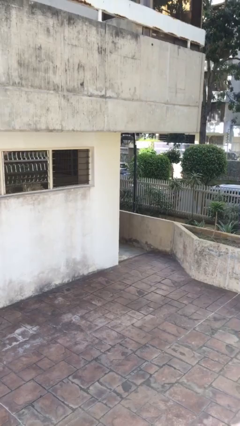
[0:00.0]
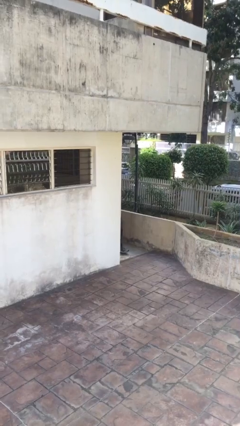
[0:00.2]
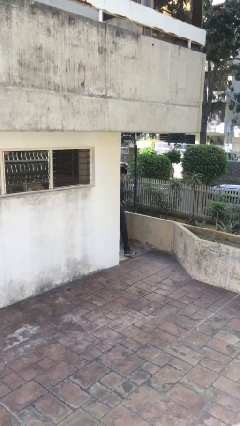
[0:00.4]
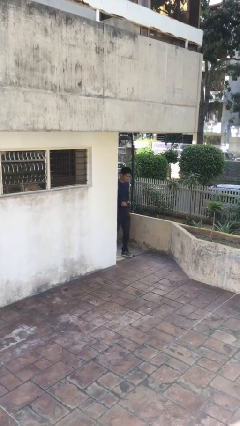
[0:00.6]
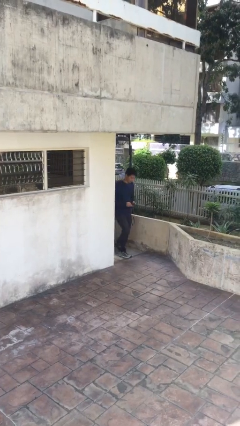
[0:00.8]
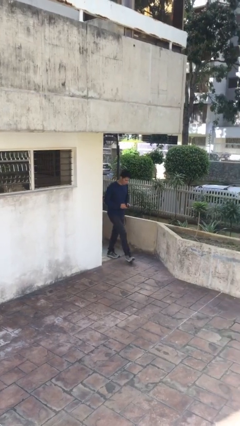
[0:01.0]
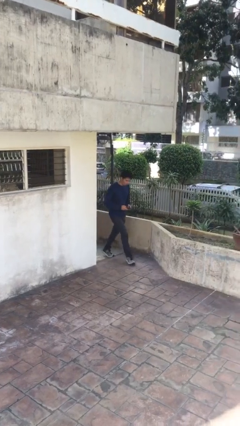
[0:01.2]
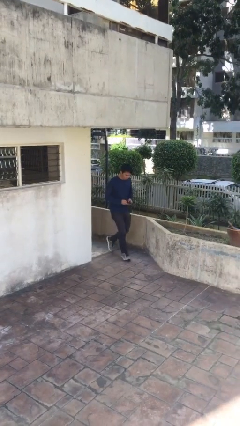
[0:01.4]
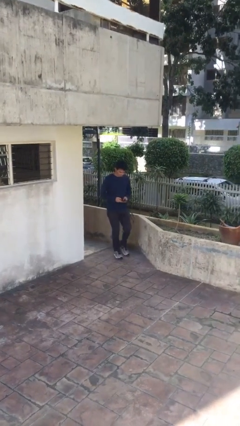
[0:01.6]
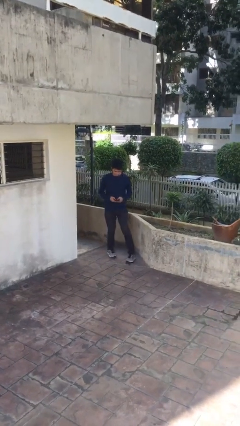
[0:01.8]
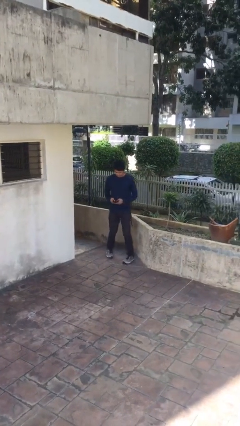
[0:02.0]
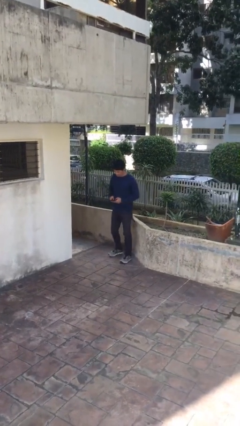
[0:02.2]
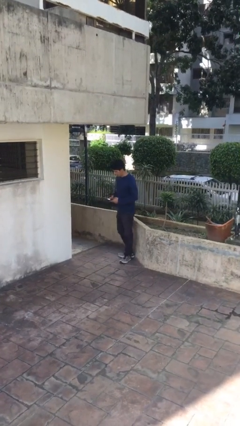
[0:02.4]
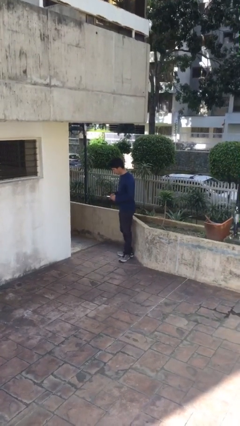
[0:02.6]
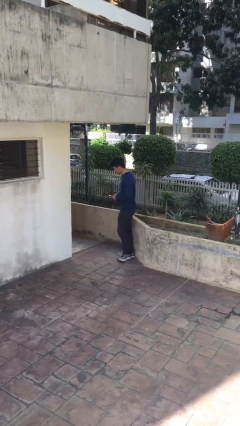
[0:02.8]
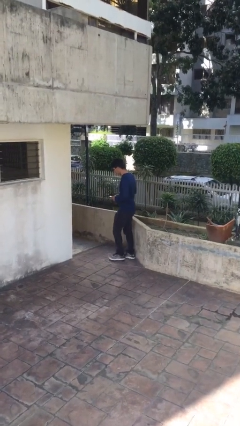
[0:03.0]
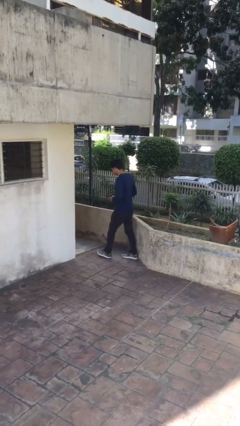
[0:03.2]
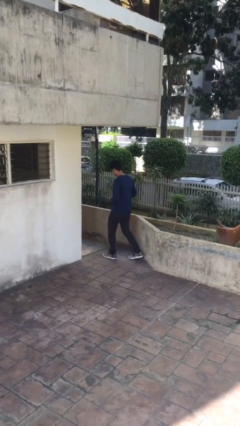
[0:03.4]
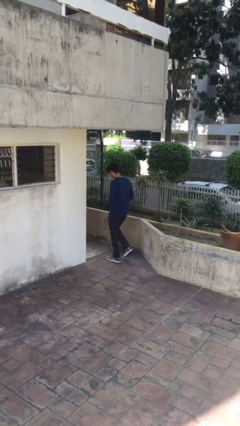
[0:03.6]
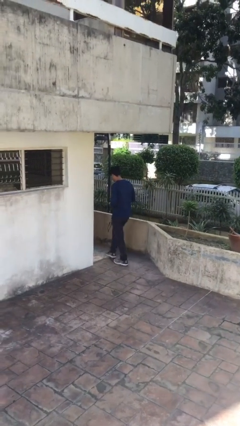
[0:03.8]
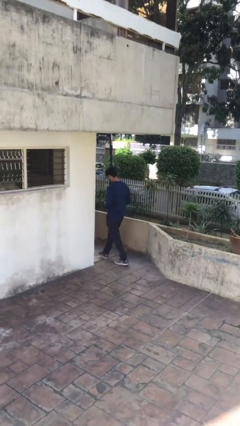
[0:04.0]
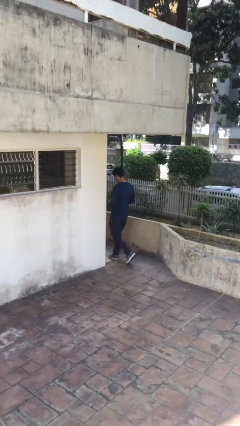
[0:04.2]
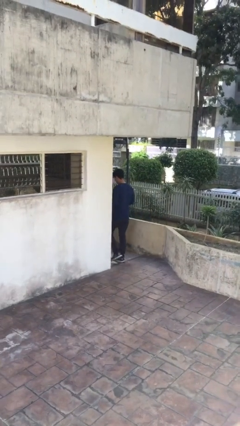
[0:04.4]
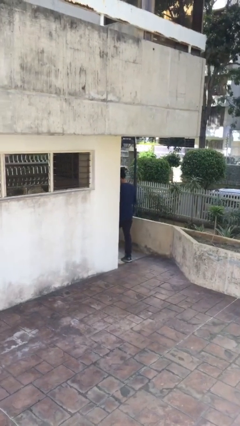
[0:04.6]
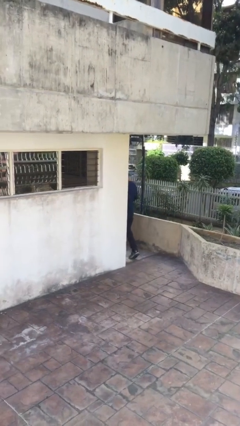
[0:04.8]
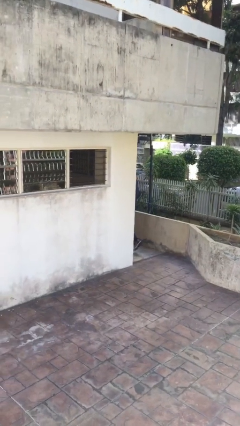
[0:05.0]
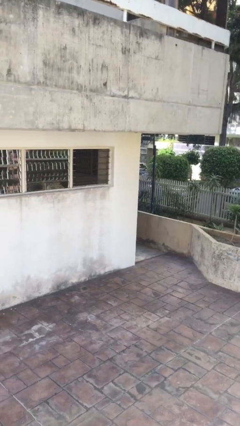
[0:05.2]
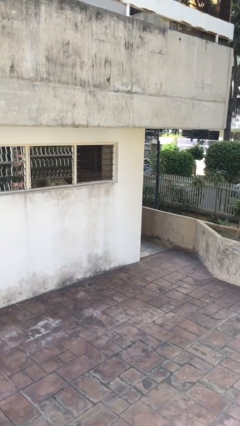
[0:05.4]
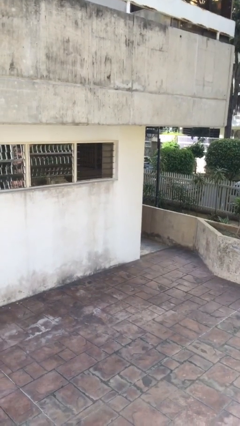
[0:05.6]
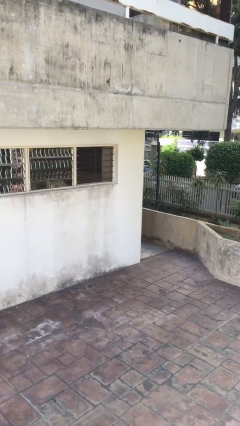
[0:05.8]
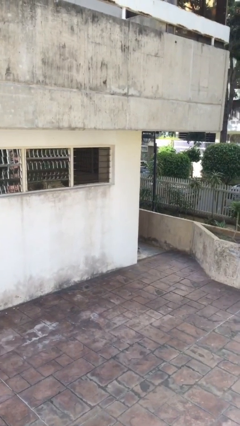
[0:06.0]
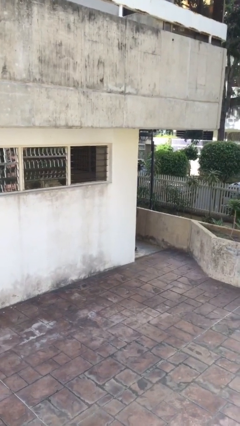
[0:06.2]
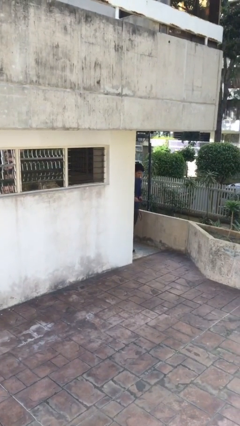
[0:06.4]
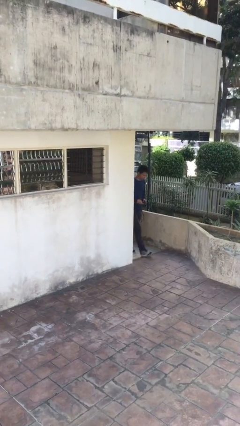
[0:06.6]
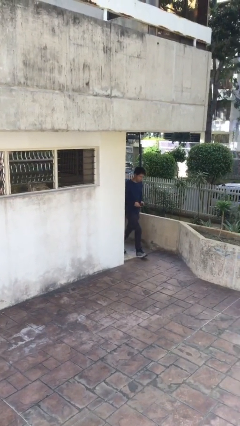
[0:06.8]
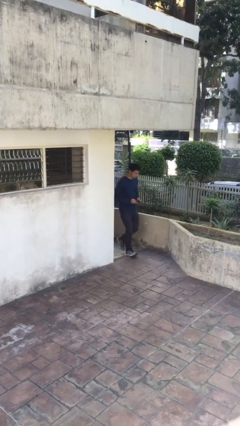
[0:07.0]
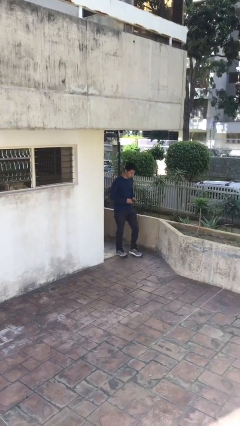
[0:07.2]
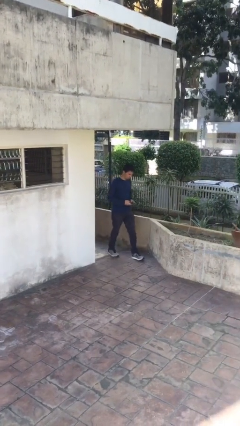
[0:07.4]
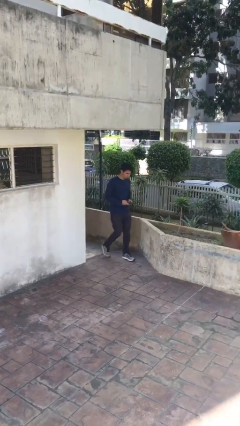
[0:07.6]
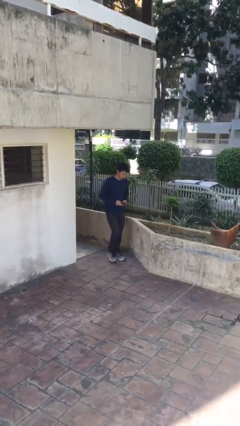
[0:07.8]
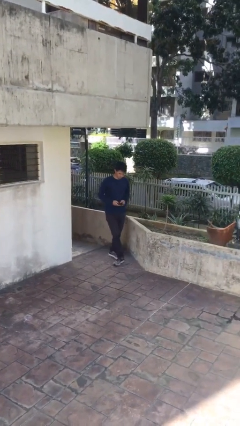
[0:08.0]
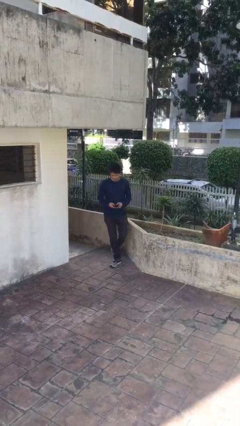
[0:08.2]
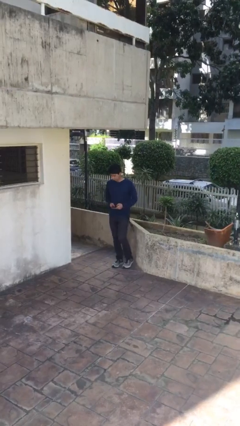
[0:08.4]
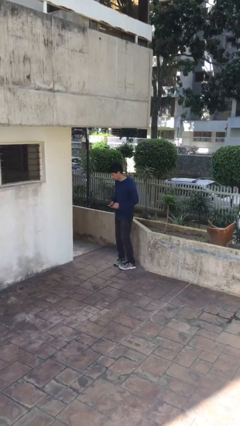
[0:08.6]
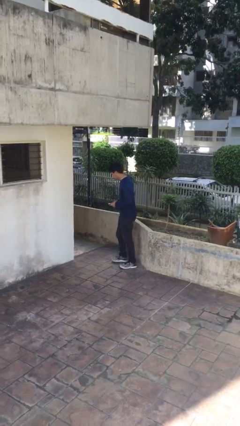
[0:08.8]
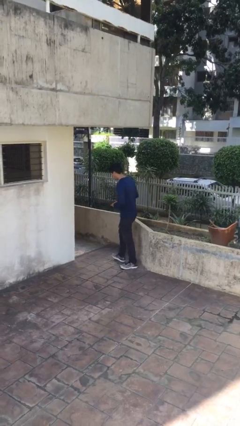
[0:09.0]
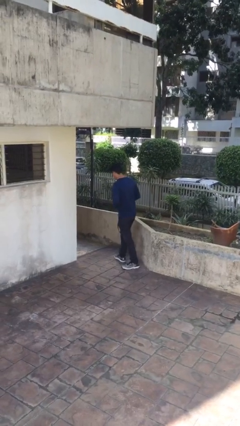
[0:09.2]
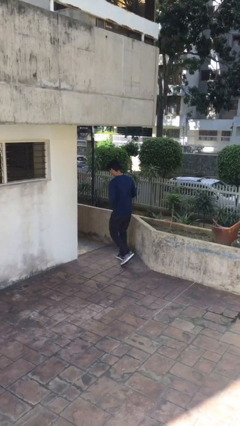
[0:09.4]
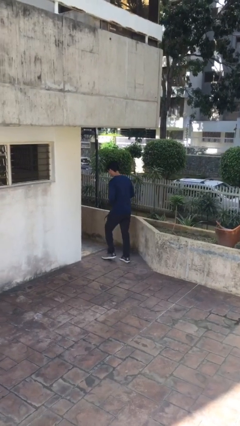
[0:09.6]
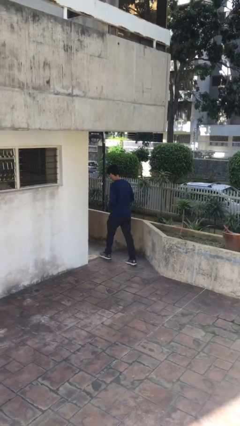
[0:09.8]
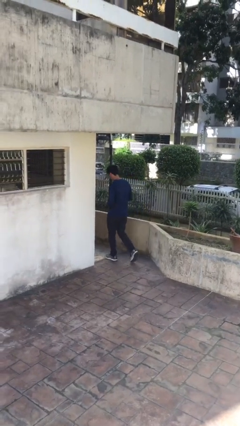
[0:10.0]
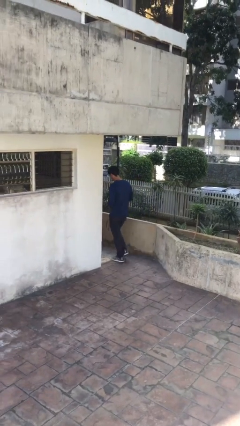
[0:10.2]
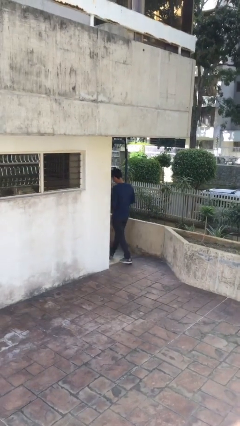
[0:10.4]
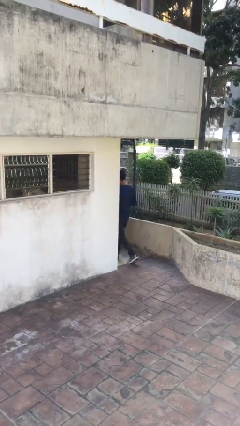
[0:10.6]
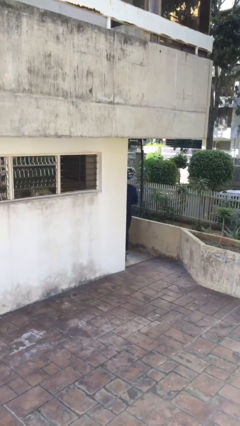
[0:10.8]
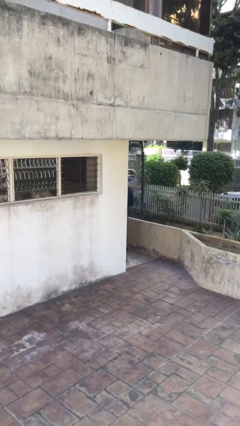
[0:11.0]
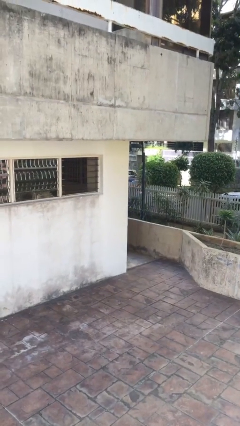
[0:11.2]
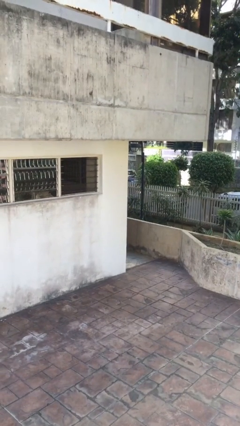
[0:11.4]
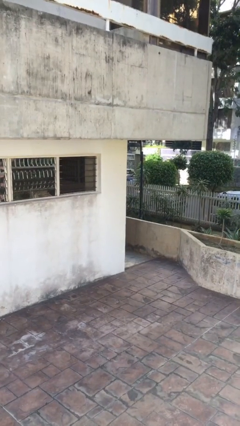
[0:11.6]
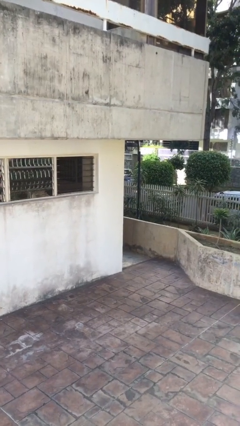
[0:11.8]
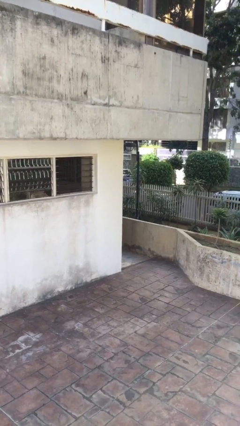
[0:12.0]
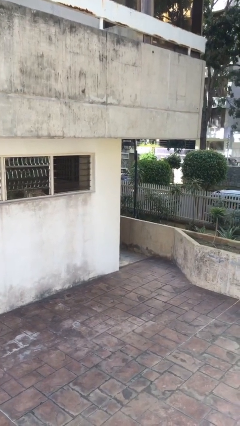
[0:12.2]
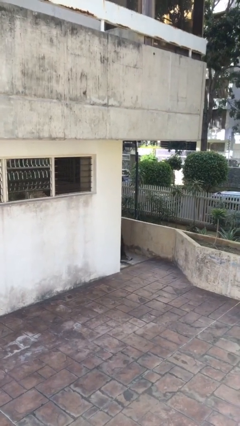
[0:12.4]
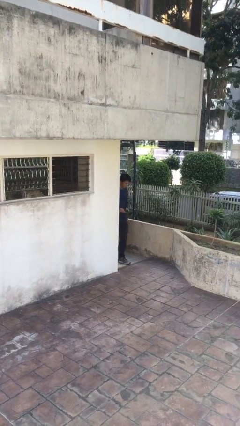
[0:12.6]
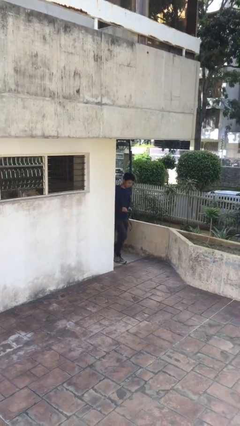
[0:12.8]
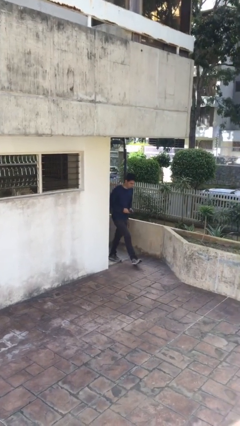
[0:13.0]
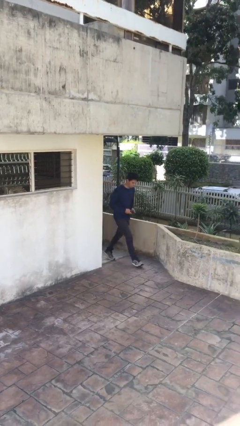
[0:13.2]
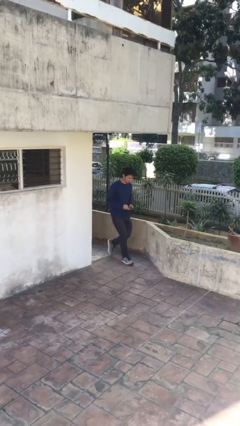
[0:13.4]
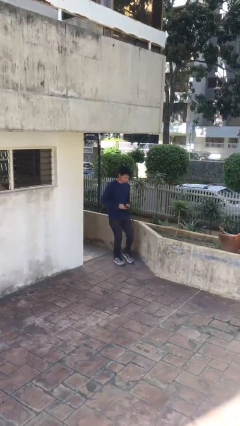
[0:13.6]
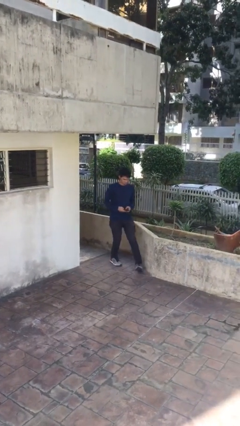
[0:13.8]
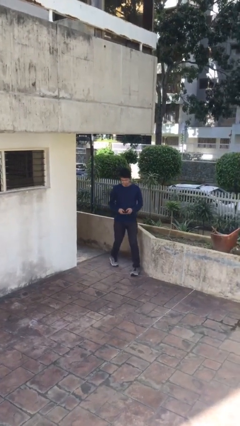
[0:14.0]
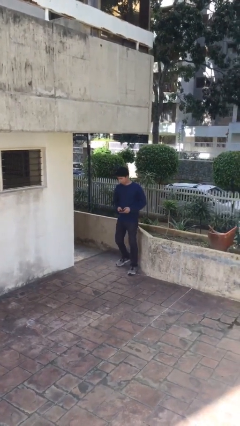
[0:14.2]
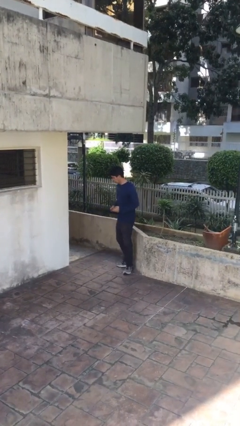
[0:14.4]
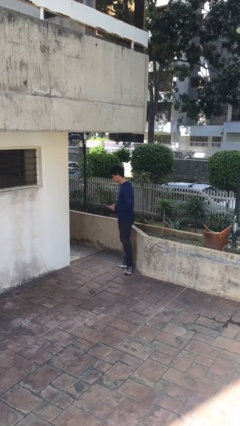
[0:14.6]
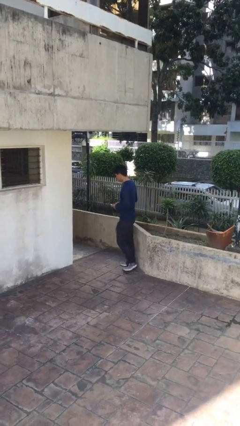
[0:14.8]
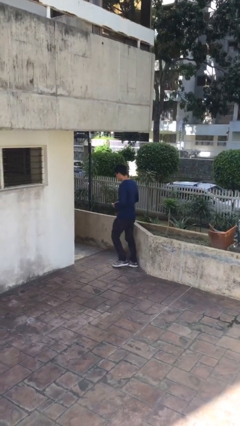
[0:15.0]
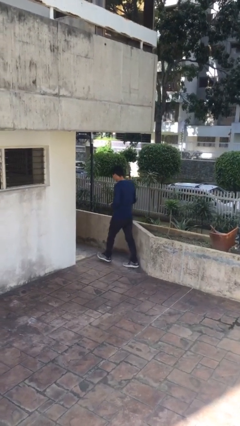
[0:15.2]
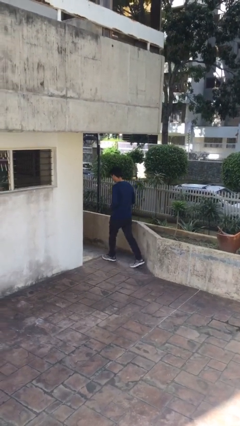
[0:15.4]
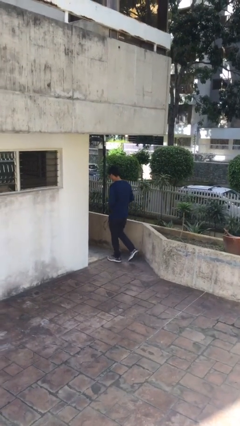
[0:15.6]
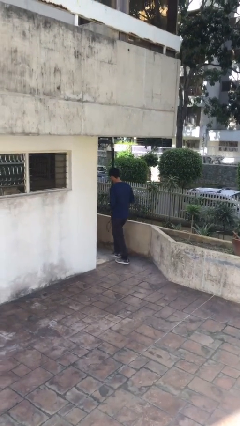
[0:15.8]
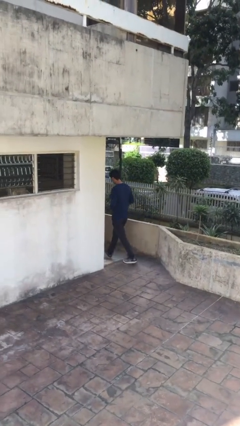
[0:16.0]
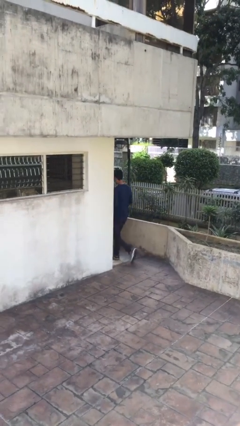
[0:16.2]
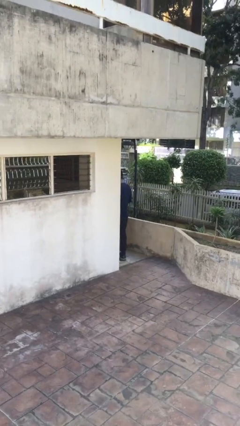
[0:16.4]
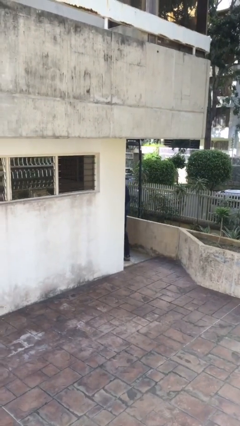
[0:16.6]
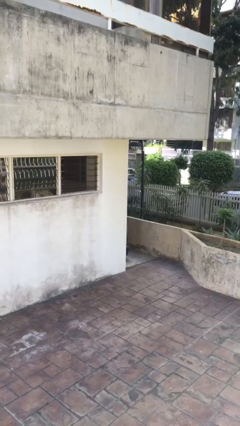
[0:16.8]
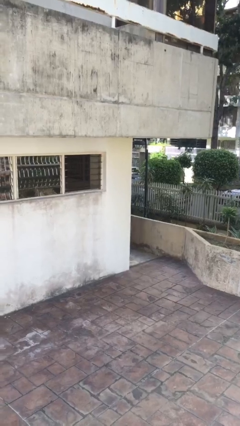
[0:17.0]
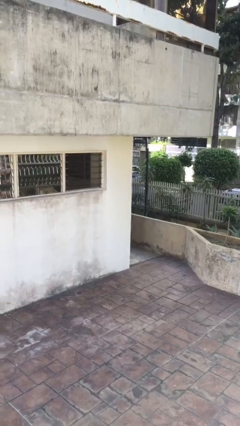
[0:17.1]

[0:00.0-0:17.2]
person texts on phone

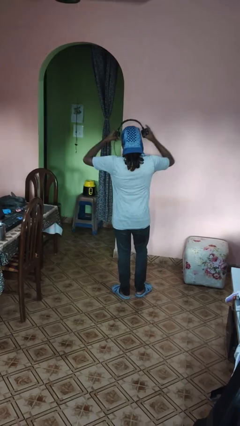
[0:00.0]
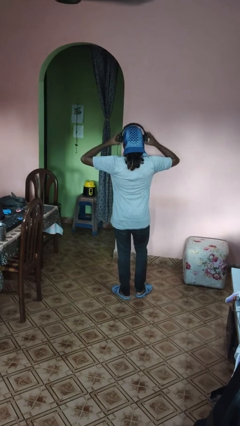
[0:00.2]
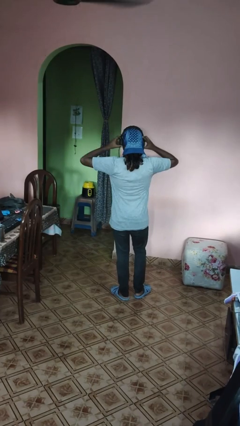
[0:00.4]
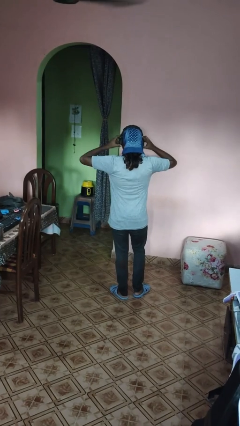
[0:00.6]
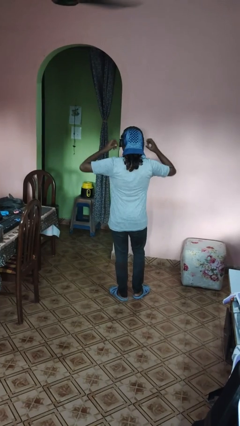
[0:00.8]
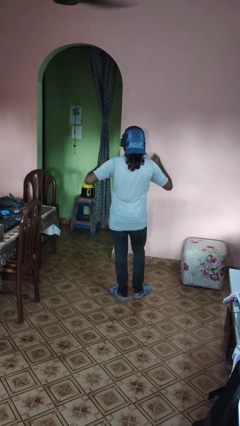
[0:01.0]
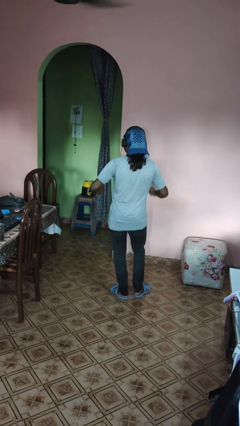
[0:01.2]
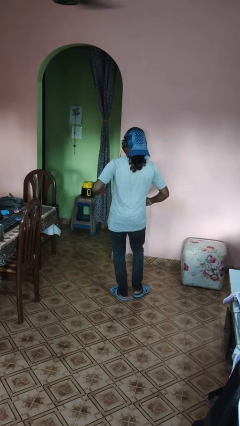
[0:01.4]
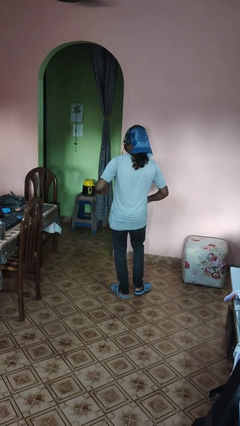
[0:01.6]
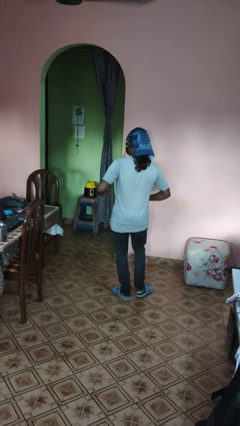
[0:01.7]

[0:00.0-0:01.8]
person puts on headphones
